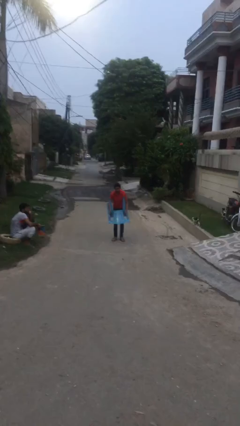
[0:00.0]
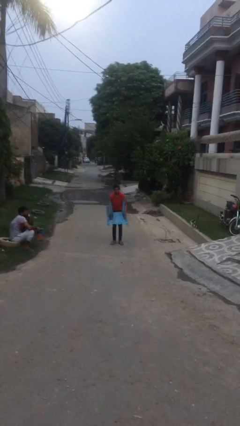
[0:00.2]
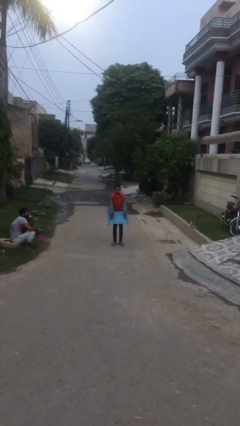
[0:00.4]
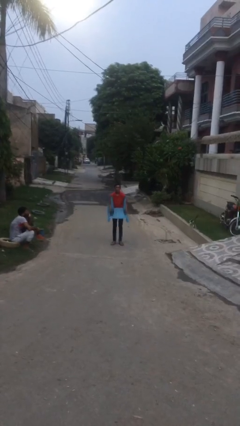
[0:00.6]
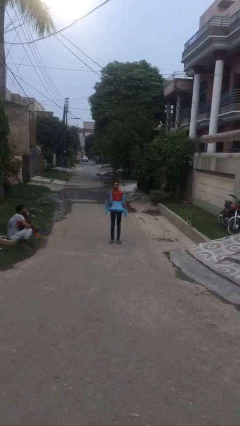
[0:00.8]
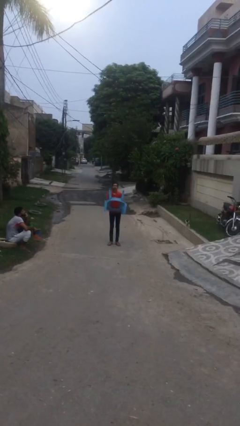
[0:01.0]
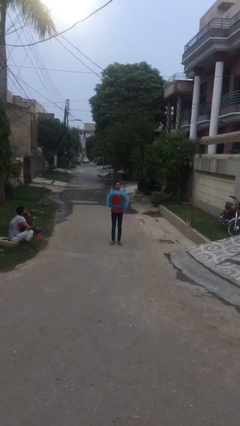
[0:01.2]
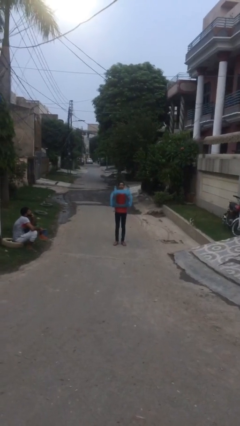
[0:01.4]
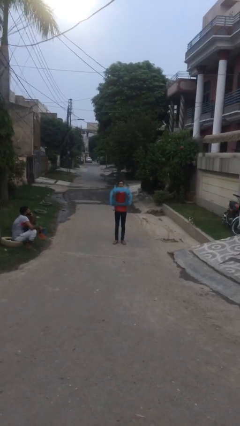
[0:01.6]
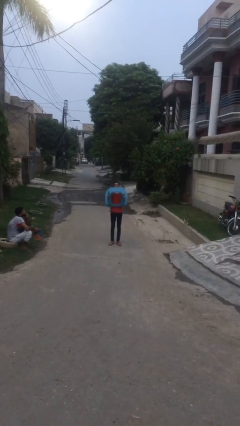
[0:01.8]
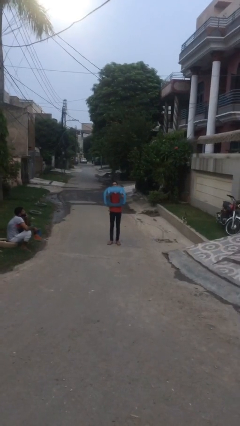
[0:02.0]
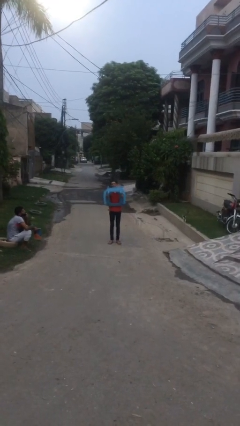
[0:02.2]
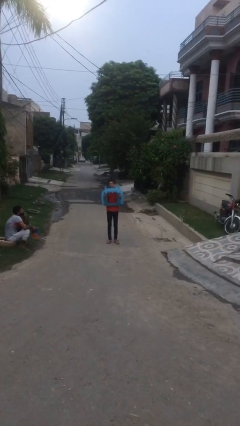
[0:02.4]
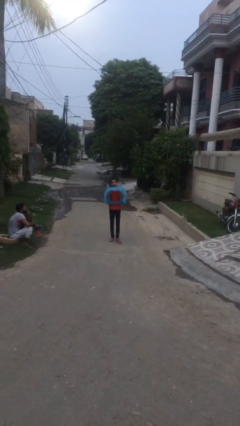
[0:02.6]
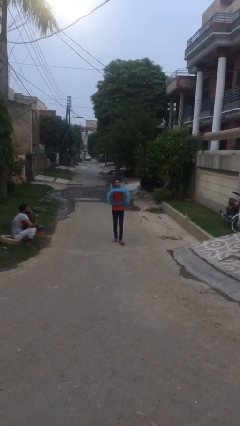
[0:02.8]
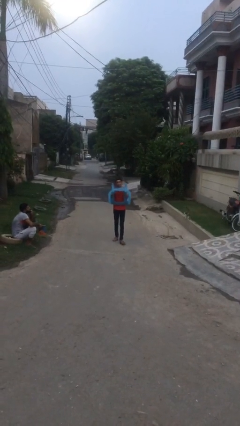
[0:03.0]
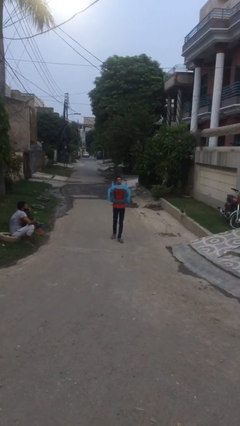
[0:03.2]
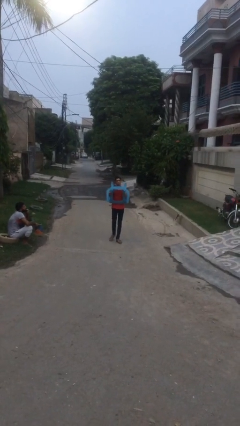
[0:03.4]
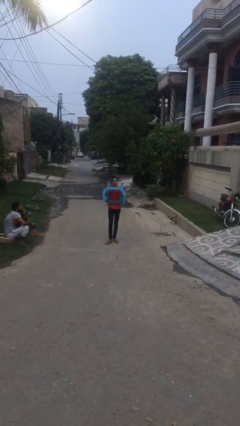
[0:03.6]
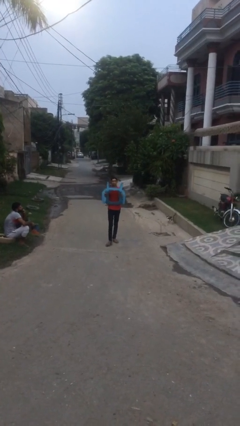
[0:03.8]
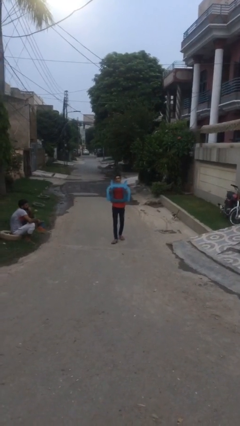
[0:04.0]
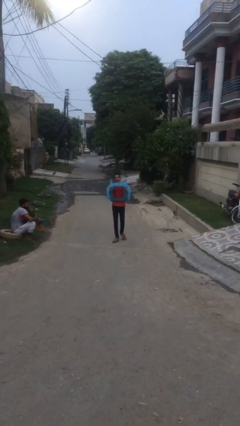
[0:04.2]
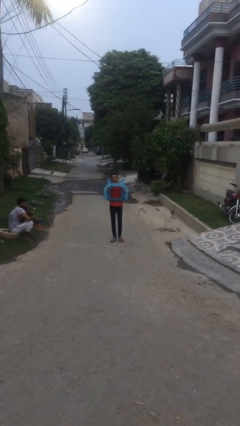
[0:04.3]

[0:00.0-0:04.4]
person carries heavy object

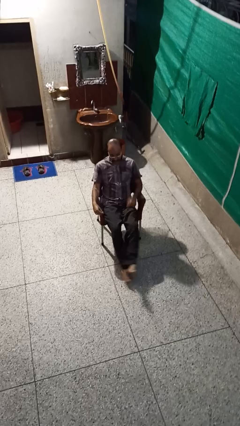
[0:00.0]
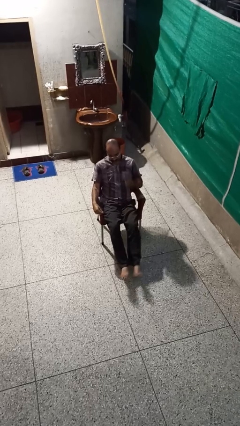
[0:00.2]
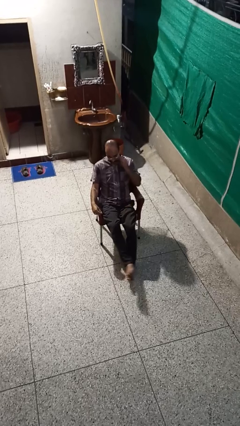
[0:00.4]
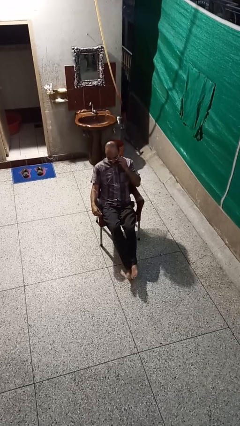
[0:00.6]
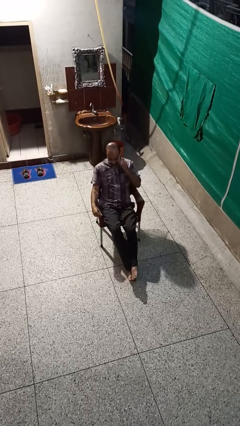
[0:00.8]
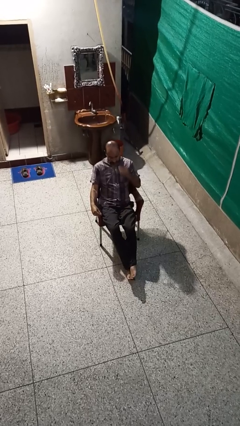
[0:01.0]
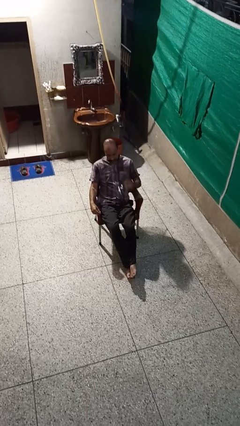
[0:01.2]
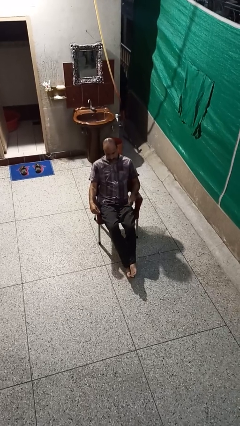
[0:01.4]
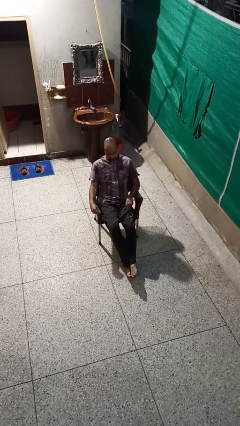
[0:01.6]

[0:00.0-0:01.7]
person takes off glasses

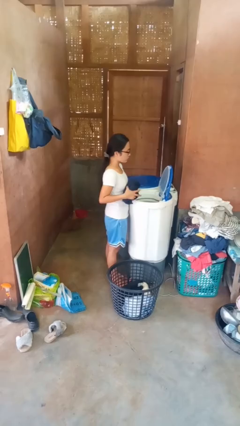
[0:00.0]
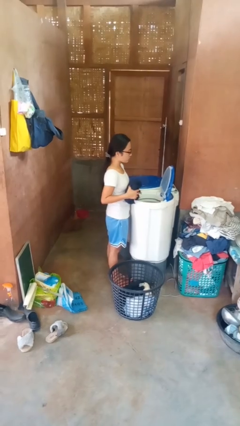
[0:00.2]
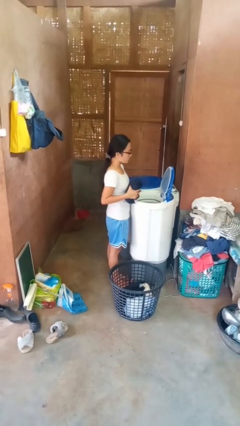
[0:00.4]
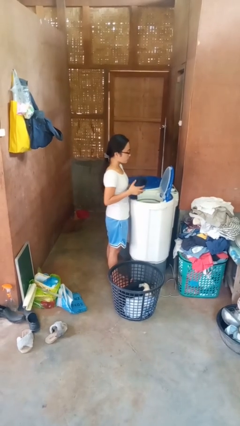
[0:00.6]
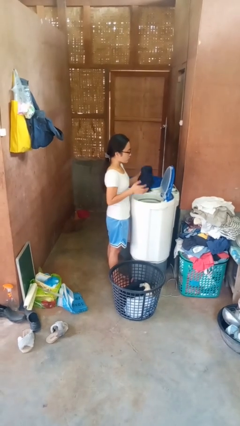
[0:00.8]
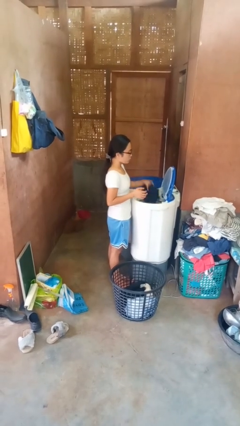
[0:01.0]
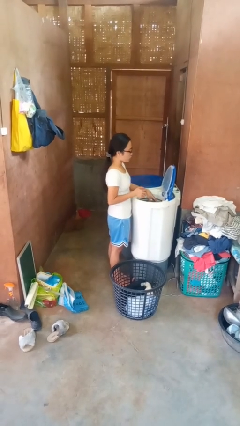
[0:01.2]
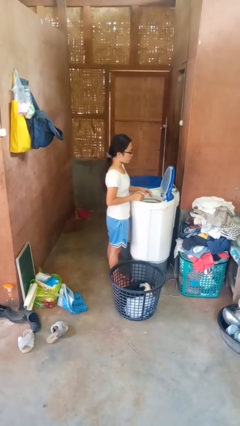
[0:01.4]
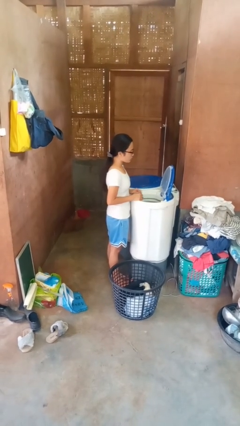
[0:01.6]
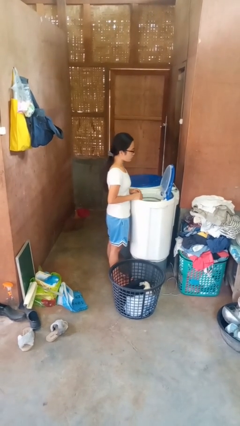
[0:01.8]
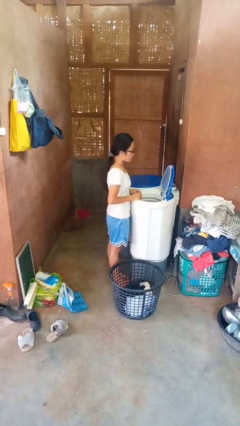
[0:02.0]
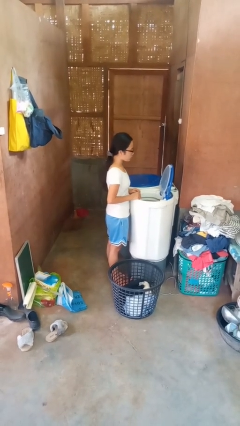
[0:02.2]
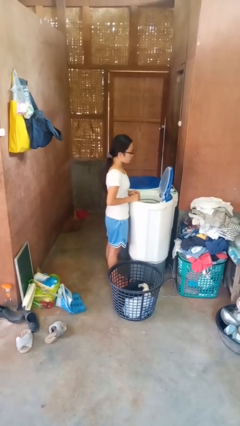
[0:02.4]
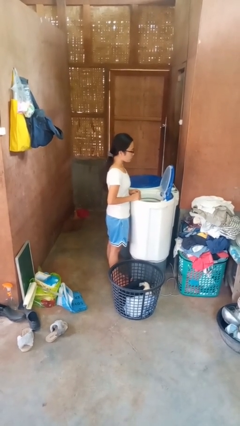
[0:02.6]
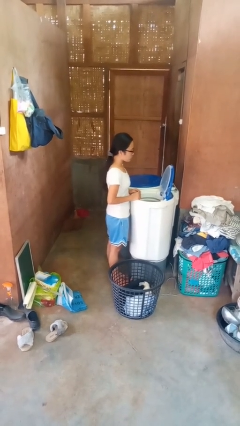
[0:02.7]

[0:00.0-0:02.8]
person loads dryer

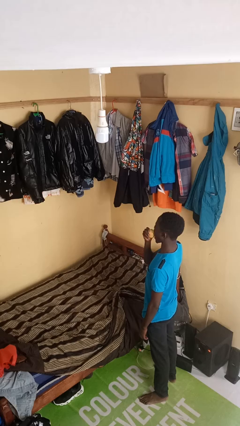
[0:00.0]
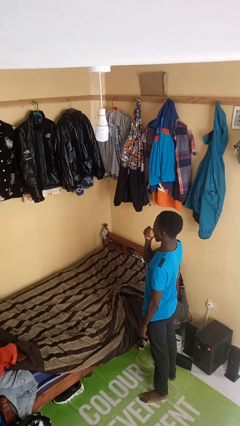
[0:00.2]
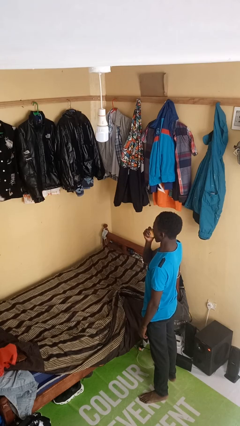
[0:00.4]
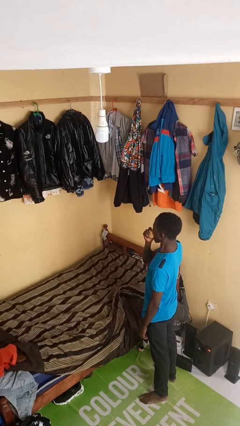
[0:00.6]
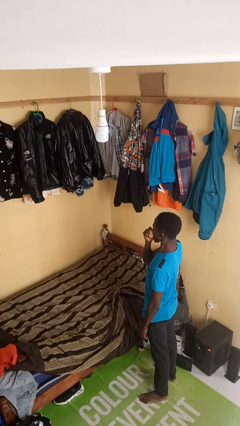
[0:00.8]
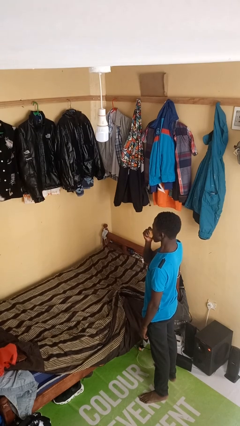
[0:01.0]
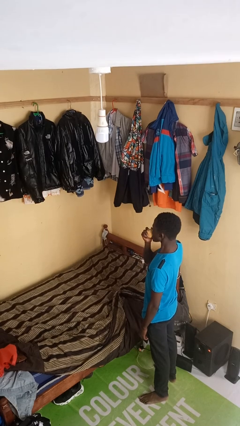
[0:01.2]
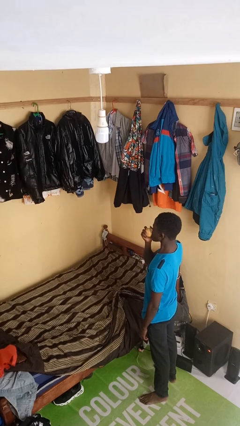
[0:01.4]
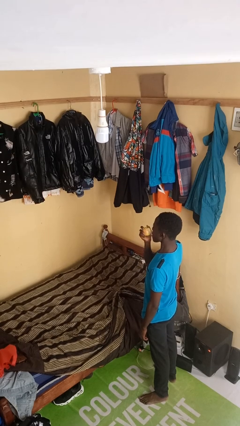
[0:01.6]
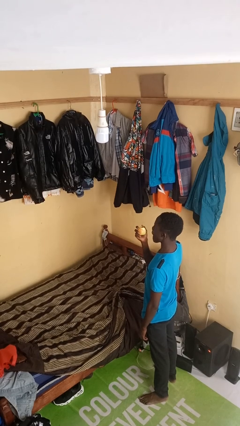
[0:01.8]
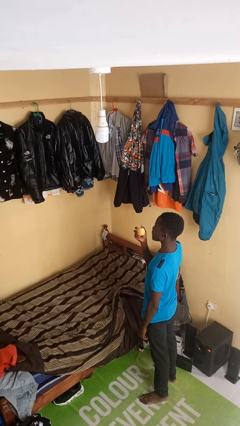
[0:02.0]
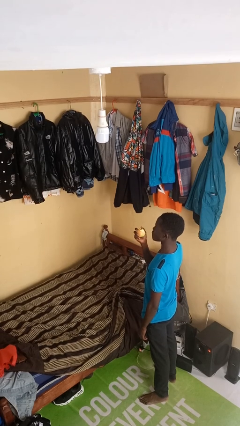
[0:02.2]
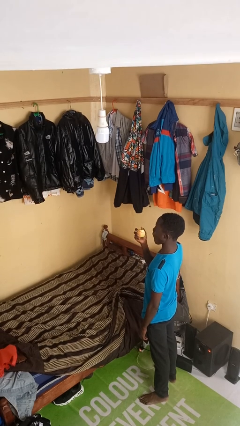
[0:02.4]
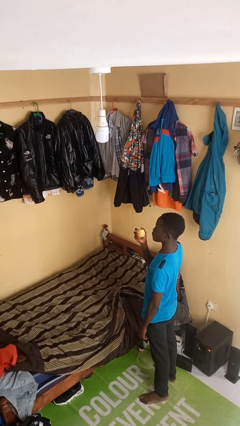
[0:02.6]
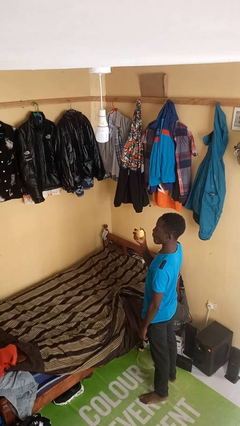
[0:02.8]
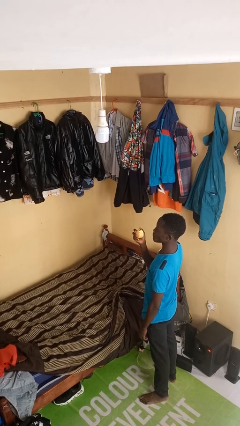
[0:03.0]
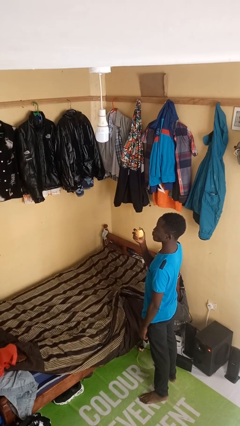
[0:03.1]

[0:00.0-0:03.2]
person eats apple

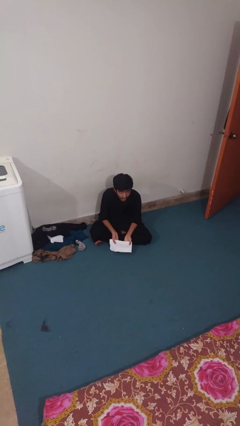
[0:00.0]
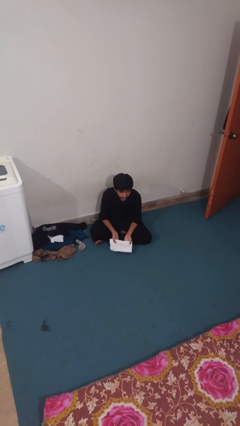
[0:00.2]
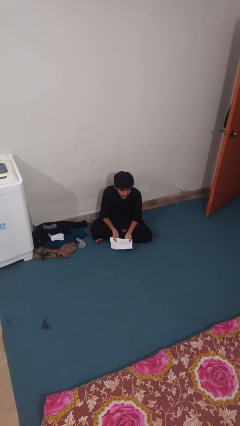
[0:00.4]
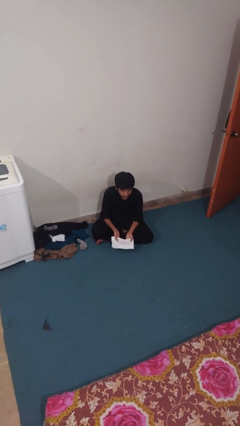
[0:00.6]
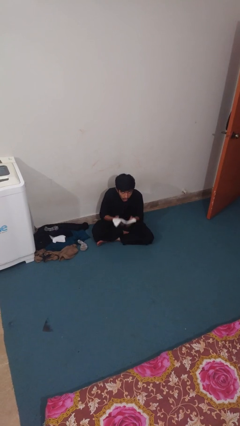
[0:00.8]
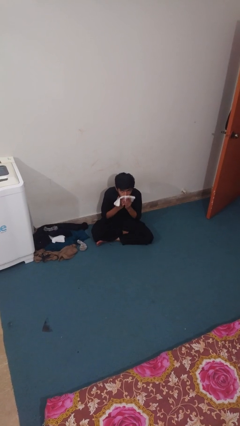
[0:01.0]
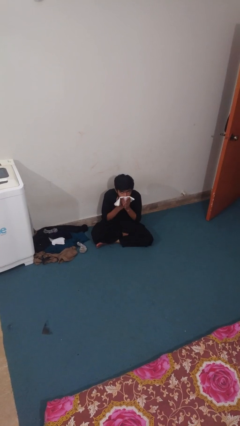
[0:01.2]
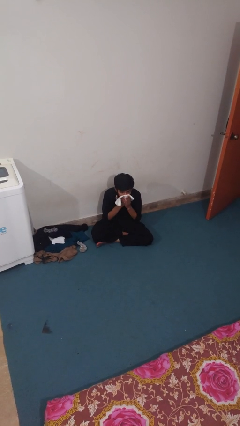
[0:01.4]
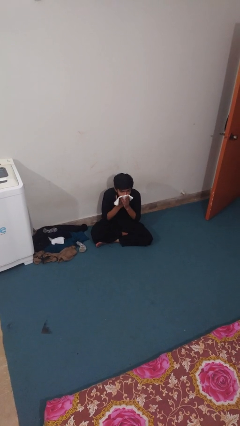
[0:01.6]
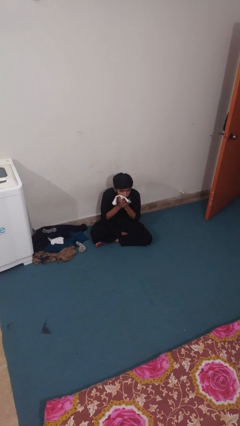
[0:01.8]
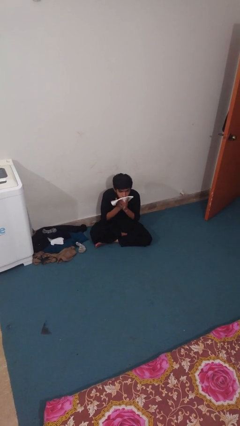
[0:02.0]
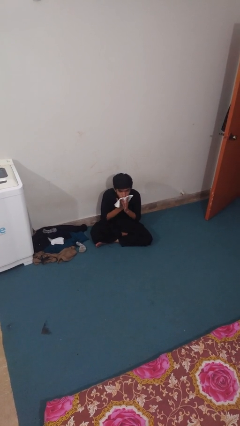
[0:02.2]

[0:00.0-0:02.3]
person wipes mouth with napkin

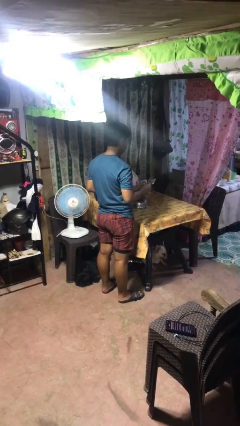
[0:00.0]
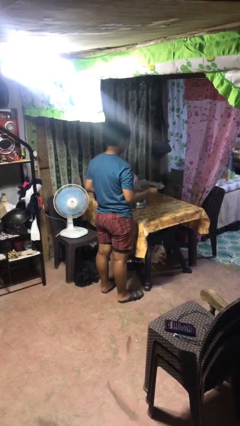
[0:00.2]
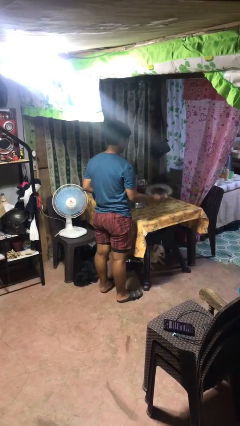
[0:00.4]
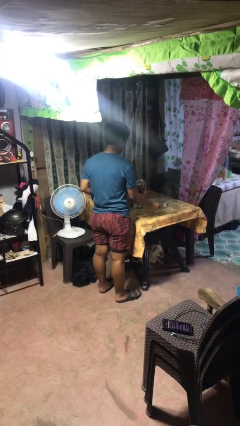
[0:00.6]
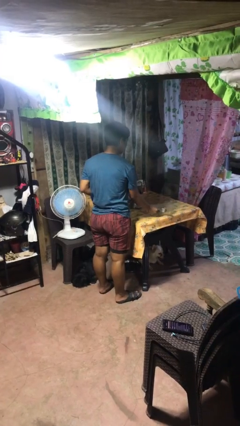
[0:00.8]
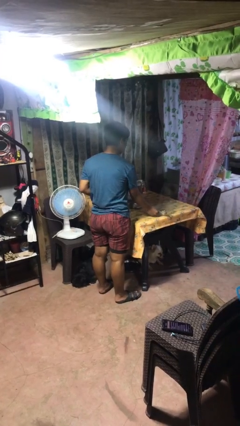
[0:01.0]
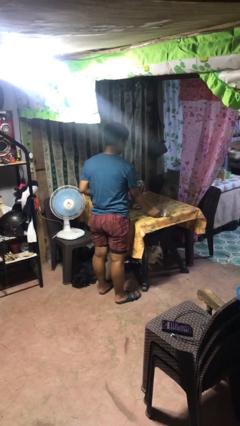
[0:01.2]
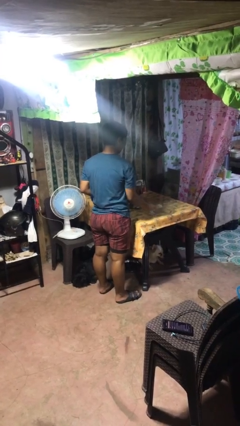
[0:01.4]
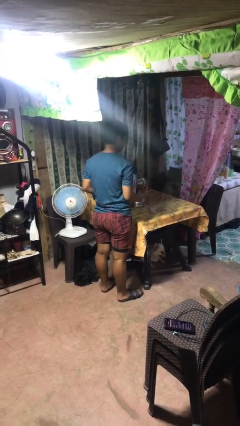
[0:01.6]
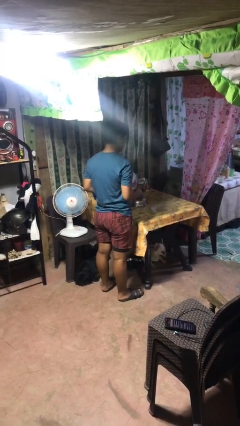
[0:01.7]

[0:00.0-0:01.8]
person sets table

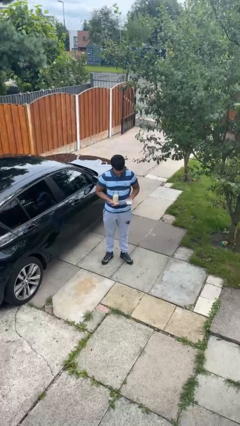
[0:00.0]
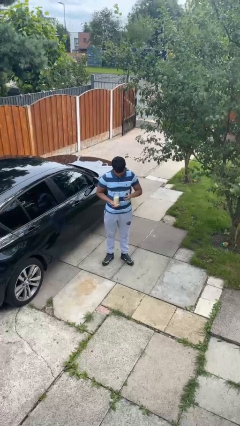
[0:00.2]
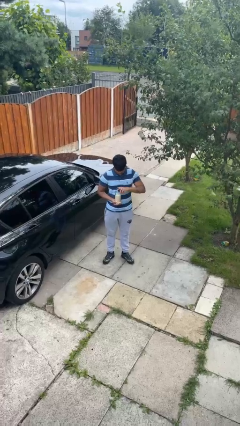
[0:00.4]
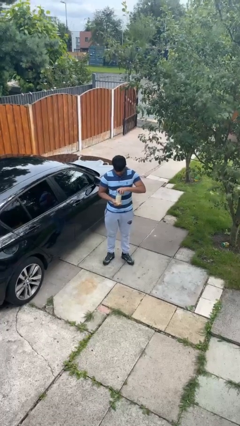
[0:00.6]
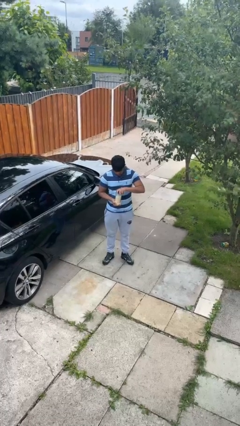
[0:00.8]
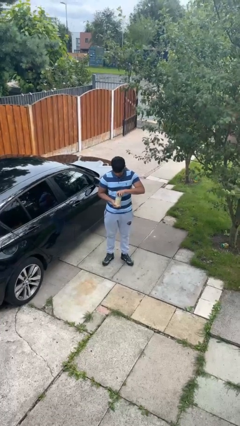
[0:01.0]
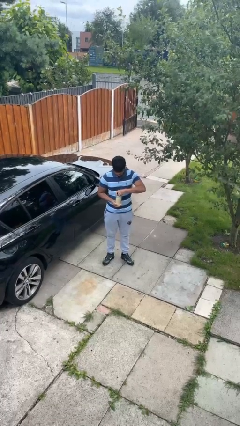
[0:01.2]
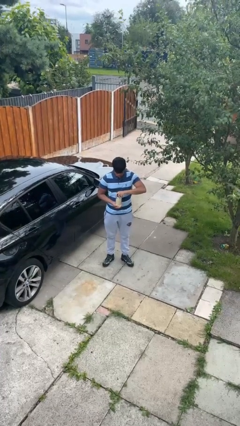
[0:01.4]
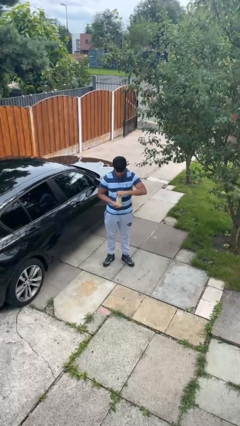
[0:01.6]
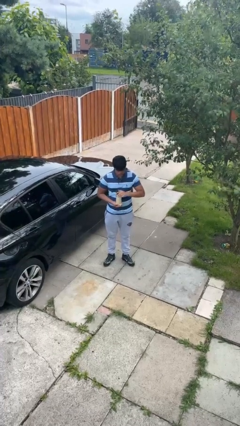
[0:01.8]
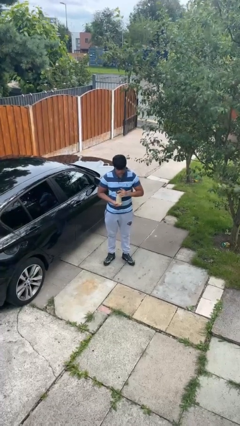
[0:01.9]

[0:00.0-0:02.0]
person closes jar
